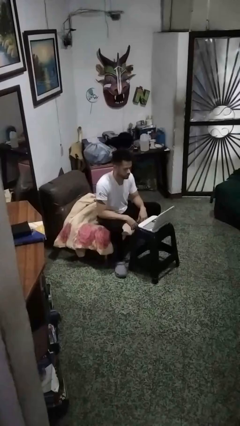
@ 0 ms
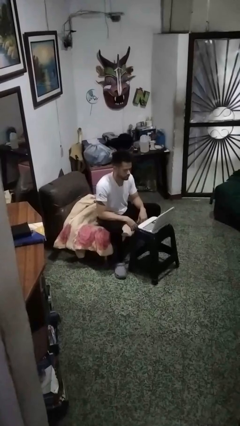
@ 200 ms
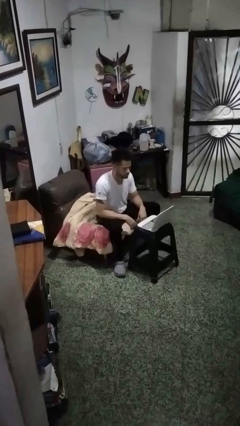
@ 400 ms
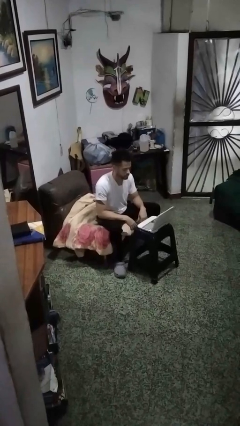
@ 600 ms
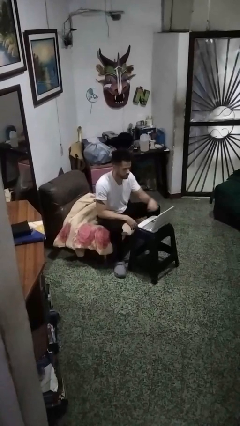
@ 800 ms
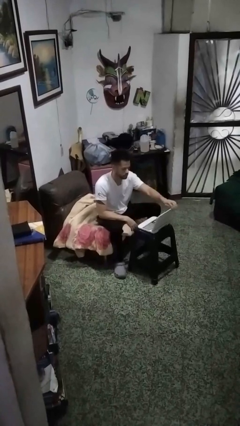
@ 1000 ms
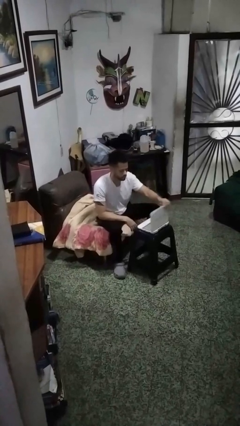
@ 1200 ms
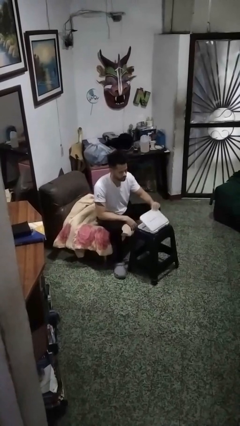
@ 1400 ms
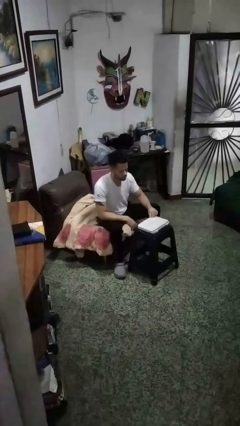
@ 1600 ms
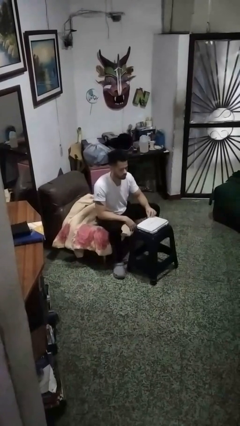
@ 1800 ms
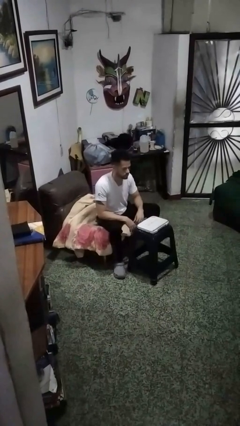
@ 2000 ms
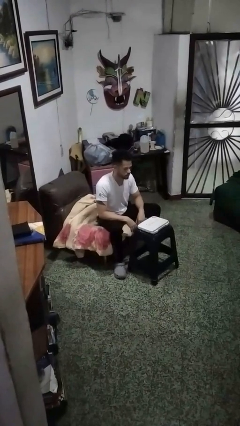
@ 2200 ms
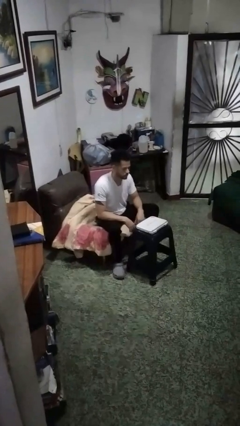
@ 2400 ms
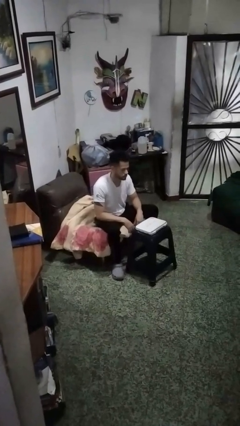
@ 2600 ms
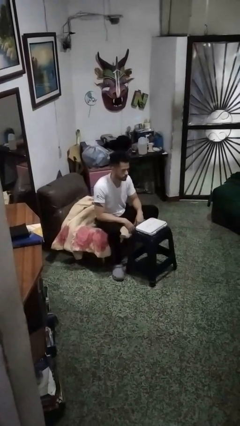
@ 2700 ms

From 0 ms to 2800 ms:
person closes laptop

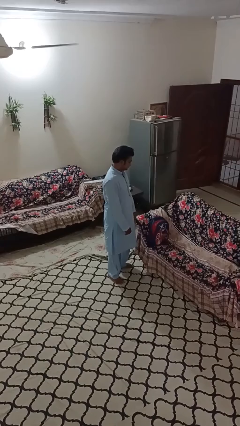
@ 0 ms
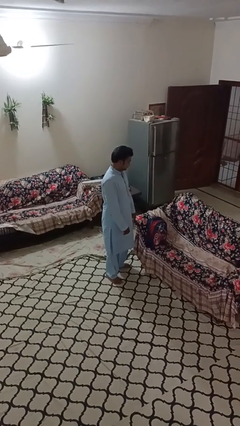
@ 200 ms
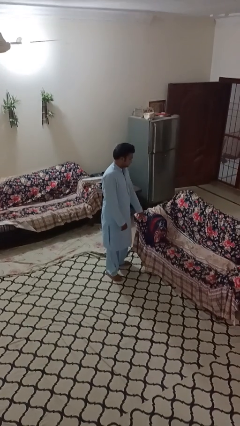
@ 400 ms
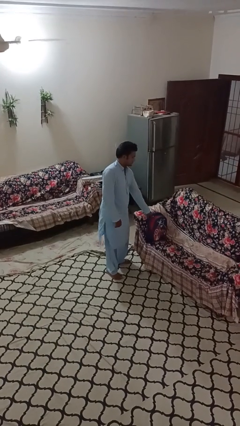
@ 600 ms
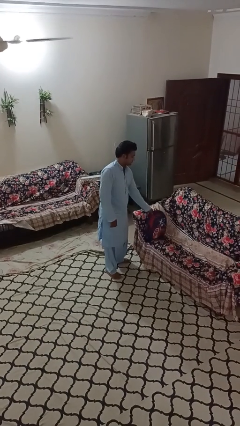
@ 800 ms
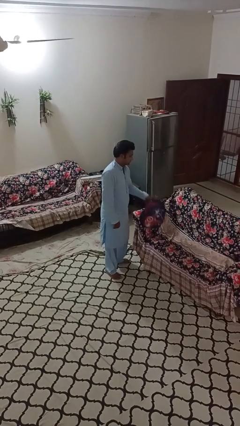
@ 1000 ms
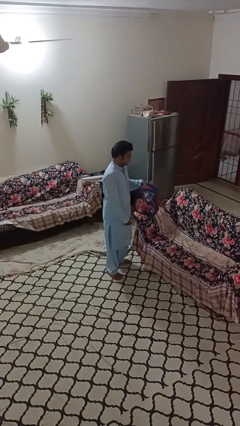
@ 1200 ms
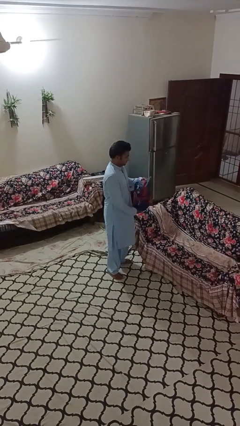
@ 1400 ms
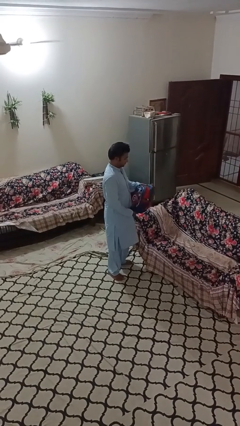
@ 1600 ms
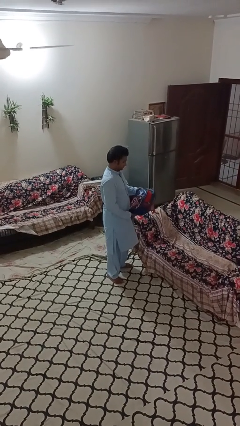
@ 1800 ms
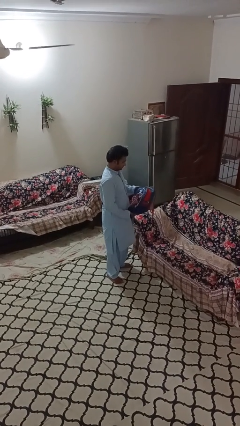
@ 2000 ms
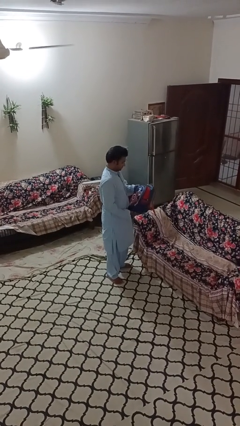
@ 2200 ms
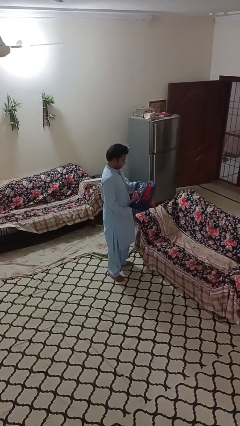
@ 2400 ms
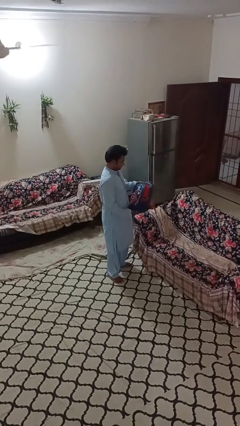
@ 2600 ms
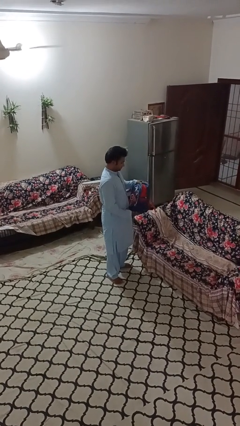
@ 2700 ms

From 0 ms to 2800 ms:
person picks up object from couch

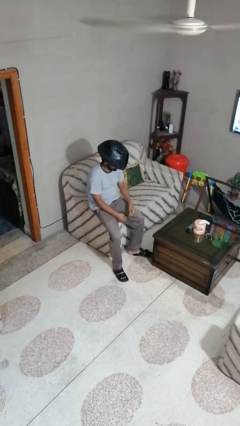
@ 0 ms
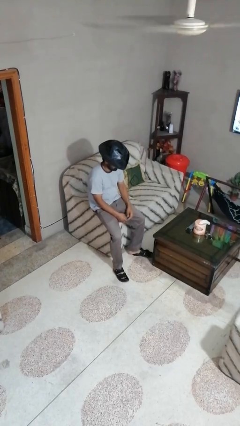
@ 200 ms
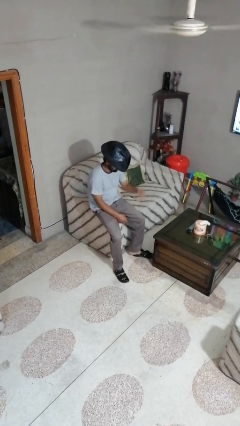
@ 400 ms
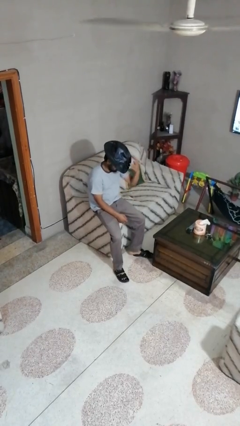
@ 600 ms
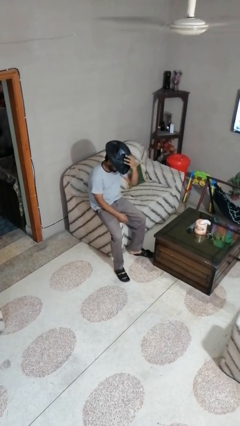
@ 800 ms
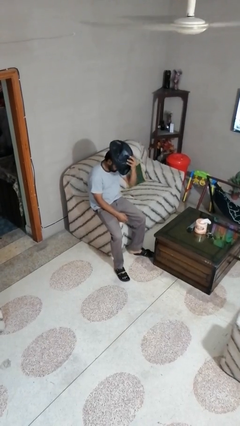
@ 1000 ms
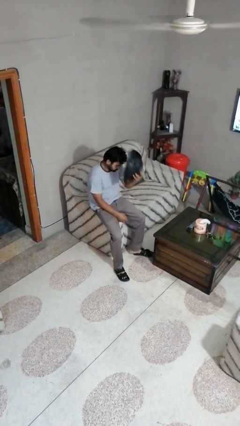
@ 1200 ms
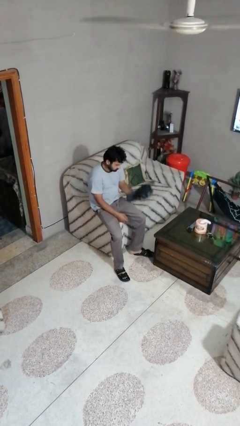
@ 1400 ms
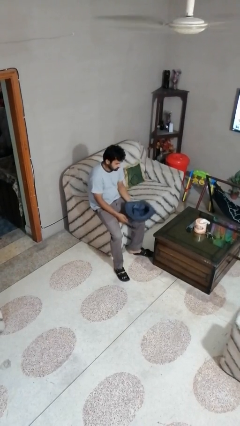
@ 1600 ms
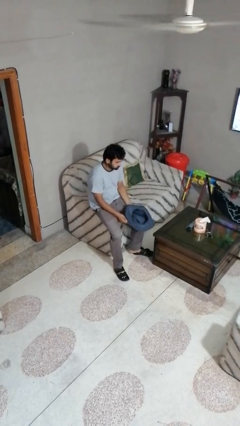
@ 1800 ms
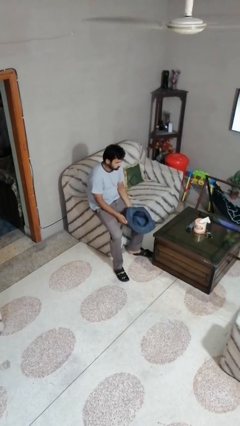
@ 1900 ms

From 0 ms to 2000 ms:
person takes off hat

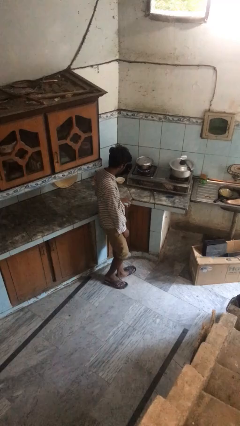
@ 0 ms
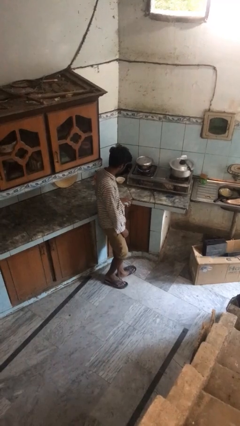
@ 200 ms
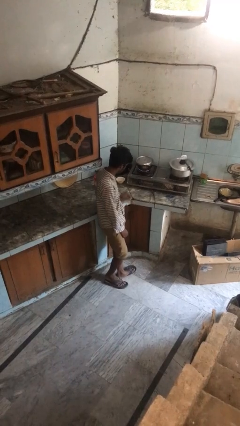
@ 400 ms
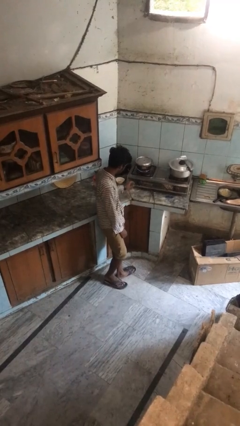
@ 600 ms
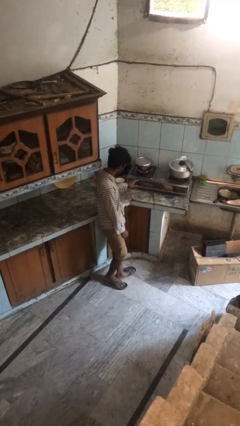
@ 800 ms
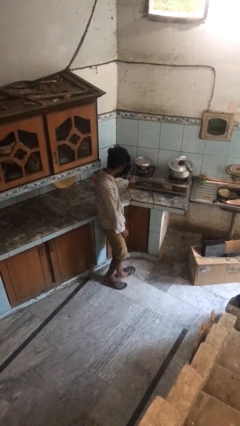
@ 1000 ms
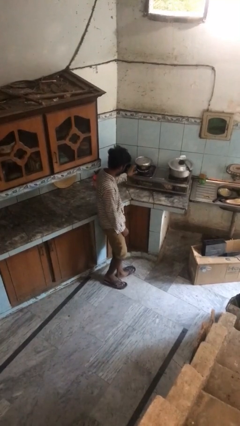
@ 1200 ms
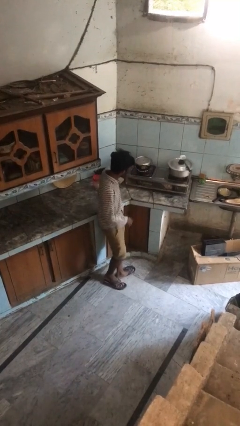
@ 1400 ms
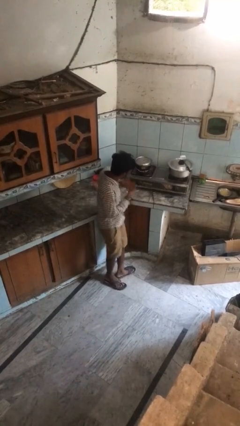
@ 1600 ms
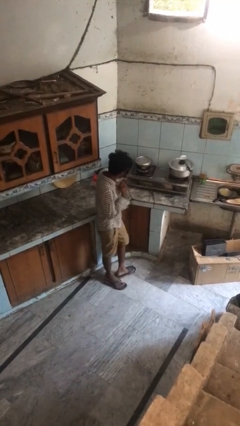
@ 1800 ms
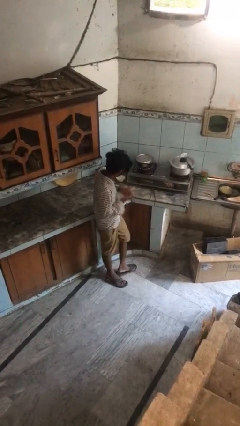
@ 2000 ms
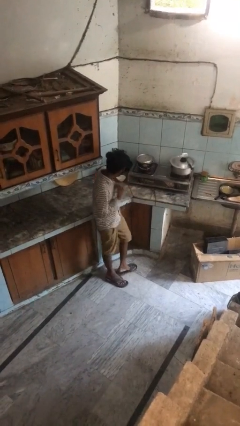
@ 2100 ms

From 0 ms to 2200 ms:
person burns hand

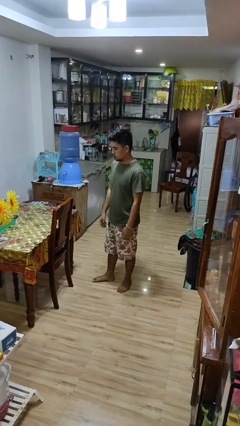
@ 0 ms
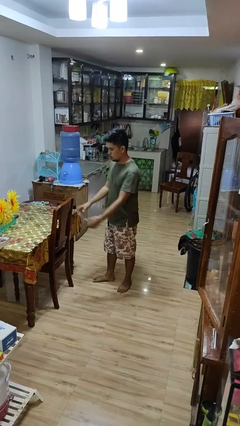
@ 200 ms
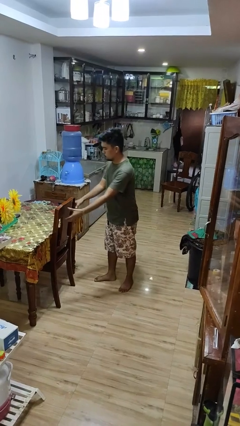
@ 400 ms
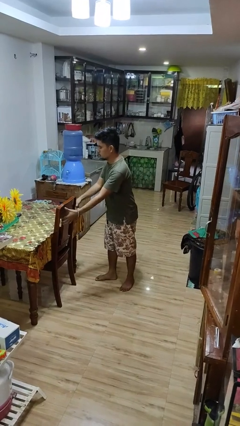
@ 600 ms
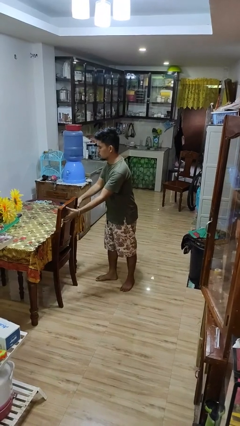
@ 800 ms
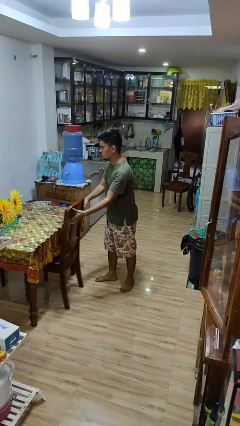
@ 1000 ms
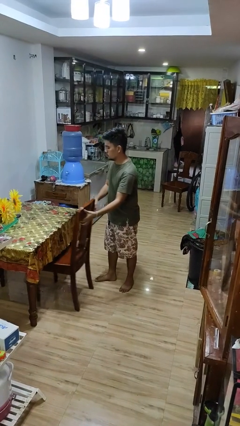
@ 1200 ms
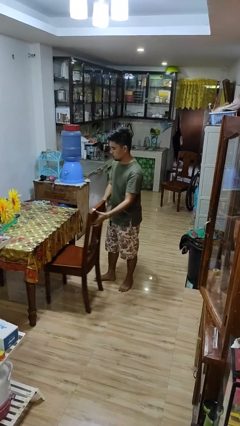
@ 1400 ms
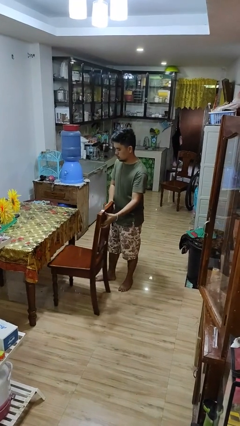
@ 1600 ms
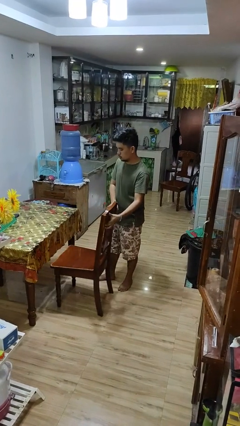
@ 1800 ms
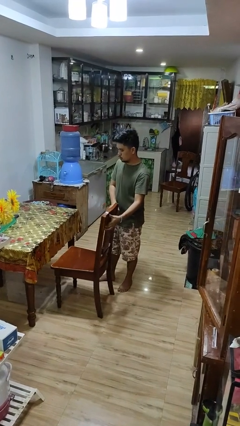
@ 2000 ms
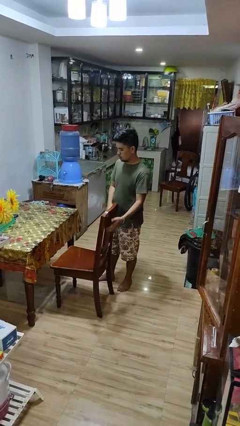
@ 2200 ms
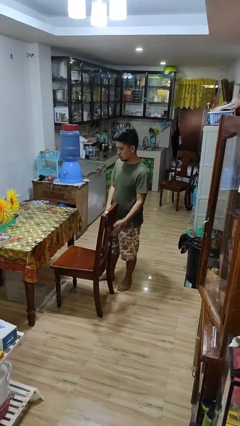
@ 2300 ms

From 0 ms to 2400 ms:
person pulls out chair

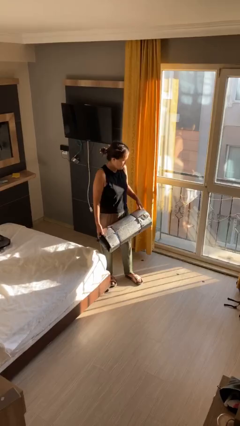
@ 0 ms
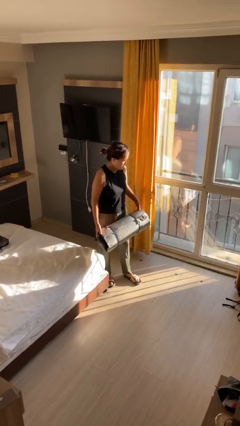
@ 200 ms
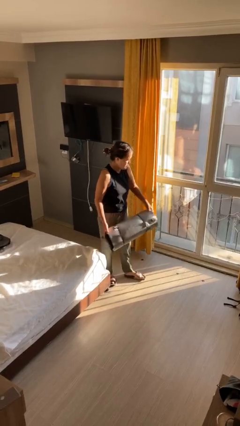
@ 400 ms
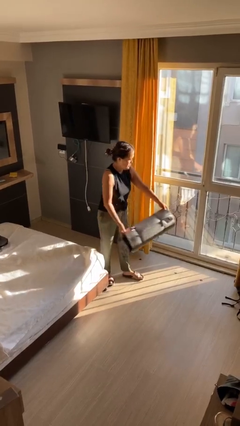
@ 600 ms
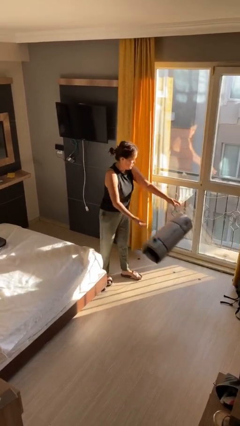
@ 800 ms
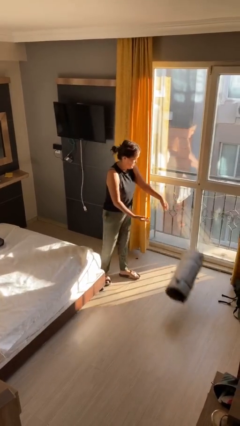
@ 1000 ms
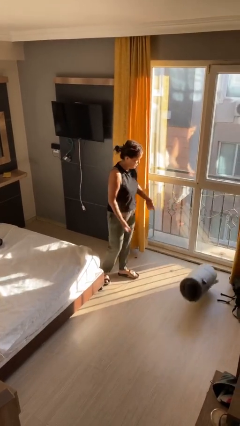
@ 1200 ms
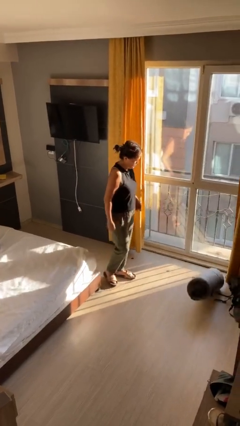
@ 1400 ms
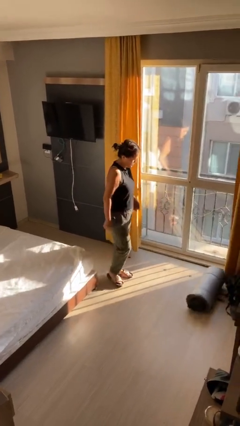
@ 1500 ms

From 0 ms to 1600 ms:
person throws object to ground

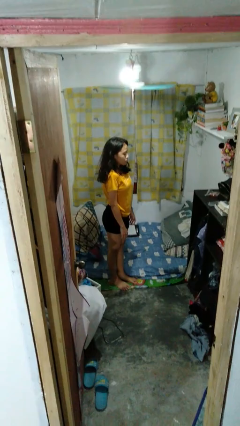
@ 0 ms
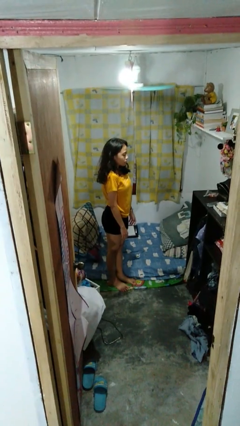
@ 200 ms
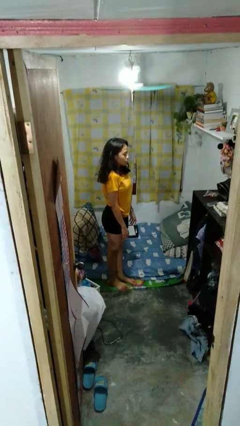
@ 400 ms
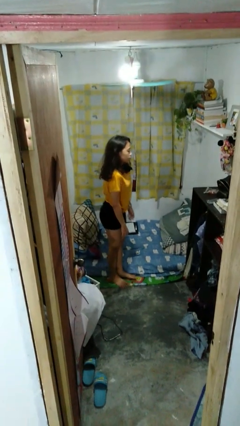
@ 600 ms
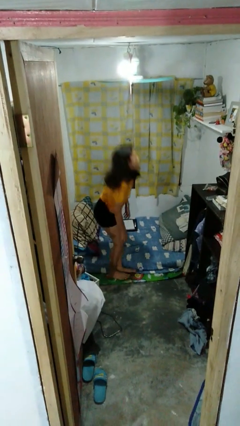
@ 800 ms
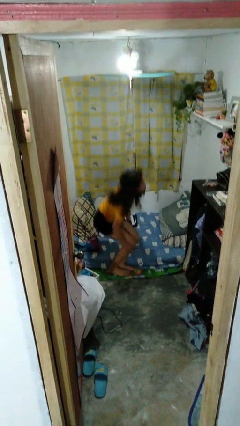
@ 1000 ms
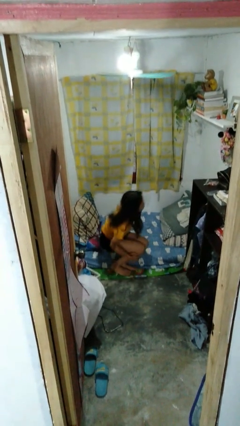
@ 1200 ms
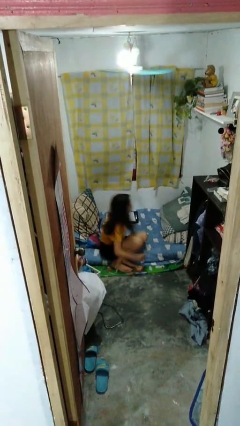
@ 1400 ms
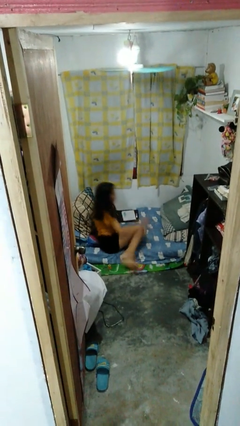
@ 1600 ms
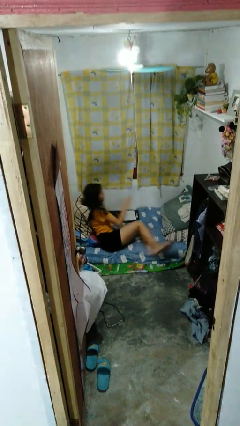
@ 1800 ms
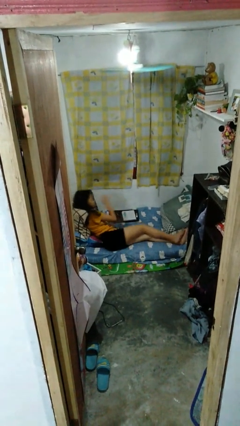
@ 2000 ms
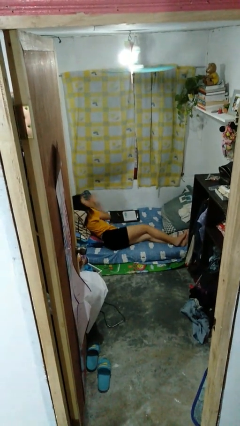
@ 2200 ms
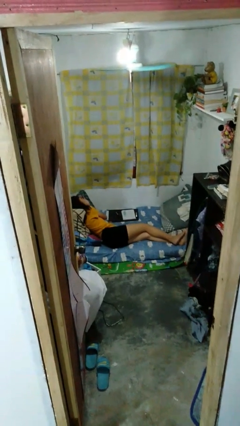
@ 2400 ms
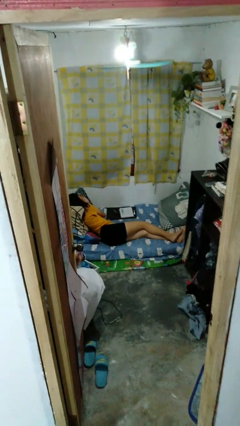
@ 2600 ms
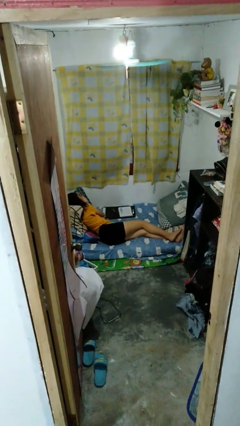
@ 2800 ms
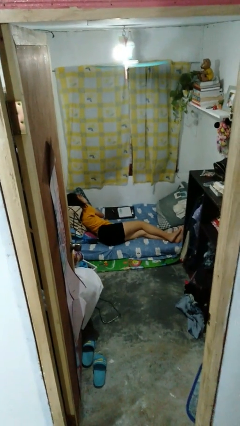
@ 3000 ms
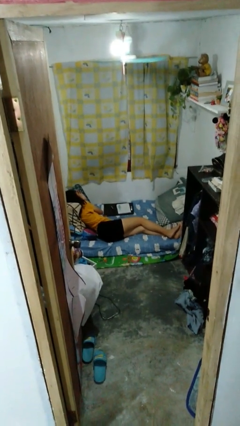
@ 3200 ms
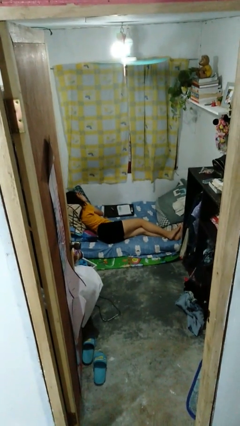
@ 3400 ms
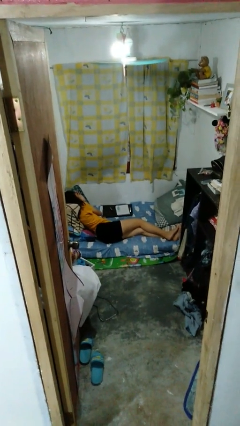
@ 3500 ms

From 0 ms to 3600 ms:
person lies down on bed
